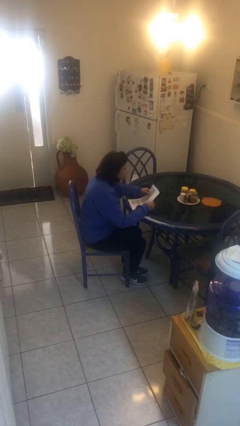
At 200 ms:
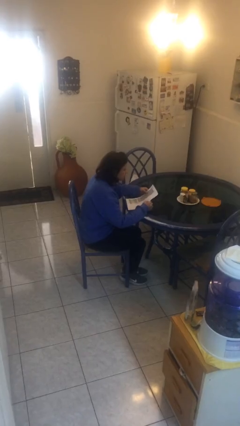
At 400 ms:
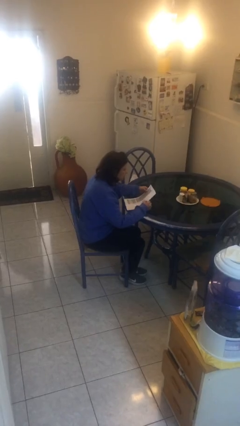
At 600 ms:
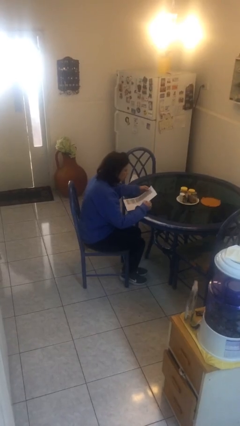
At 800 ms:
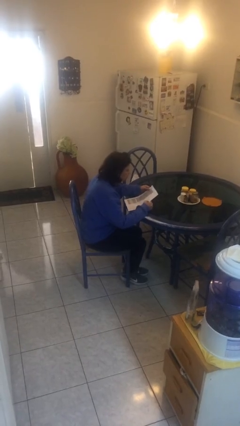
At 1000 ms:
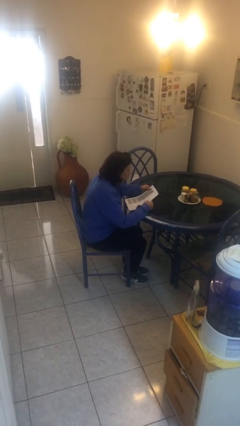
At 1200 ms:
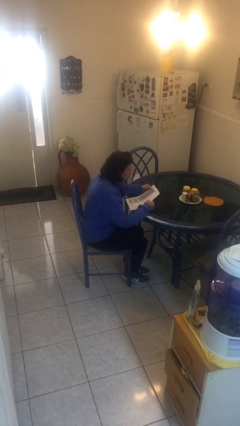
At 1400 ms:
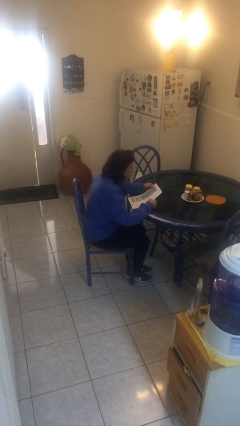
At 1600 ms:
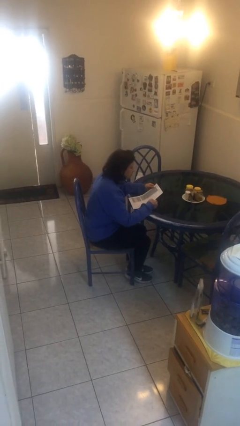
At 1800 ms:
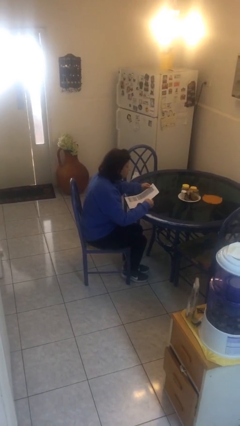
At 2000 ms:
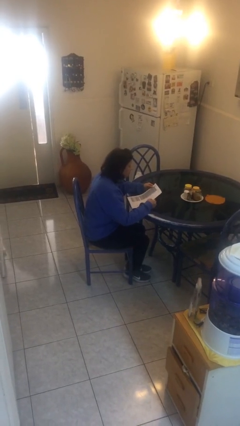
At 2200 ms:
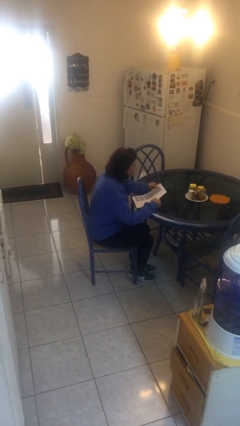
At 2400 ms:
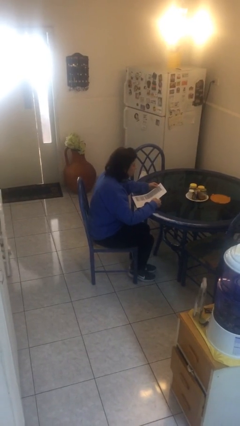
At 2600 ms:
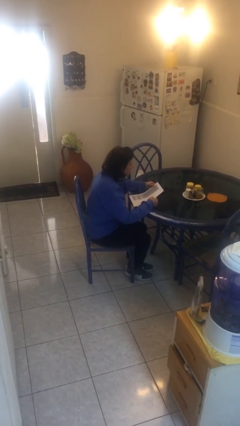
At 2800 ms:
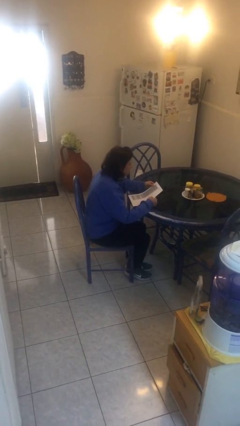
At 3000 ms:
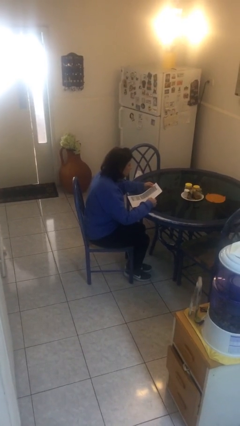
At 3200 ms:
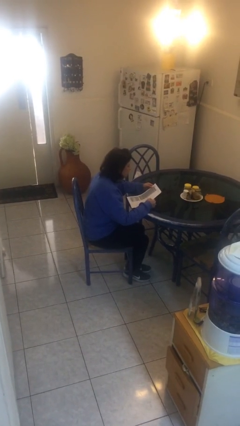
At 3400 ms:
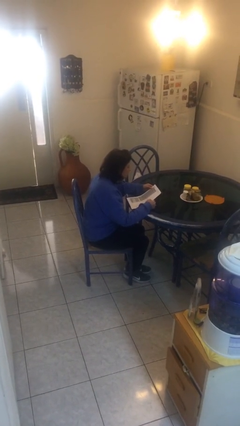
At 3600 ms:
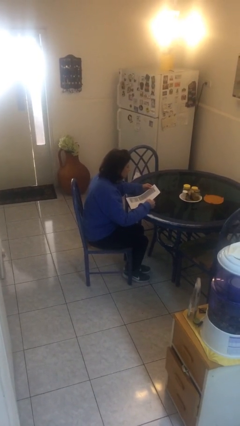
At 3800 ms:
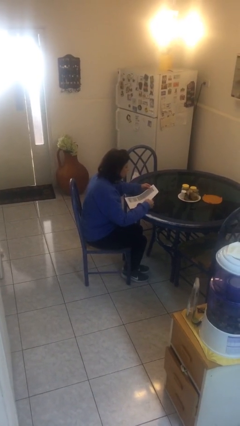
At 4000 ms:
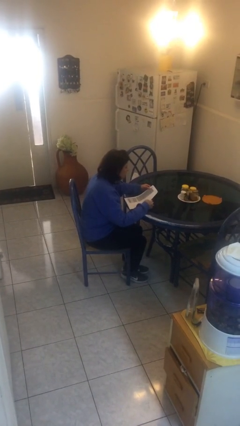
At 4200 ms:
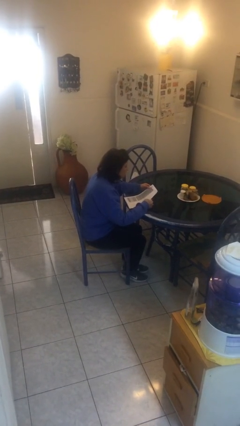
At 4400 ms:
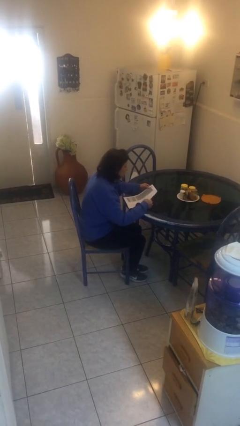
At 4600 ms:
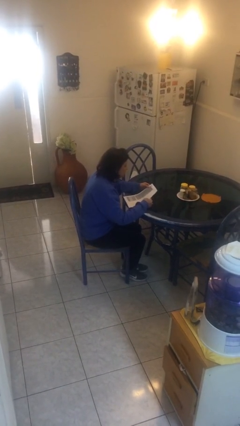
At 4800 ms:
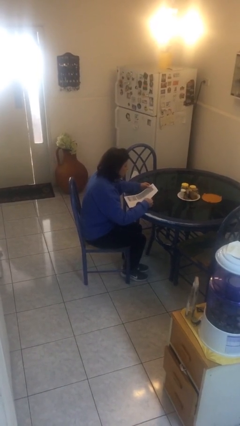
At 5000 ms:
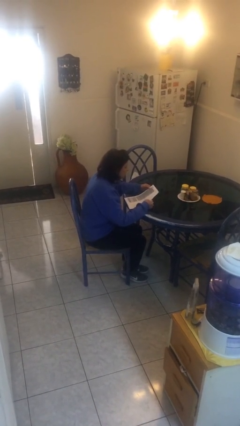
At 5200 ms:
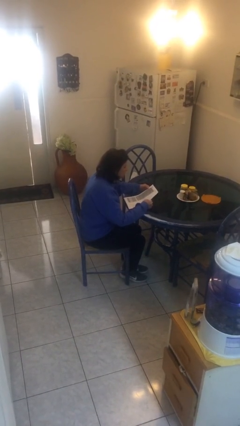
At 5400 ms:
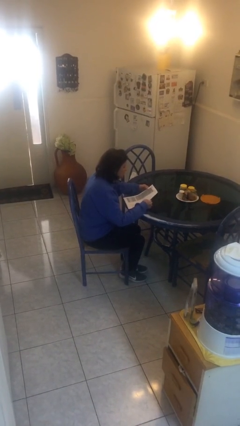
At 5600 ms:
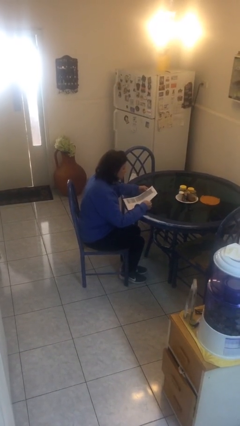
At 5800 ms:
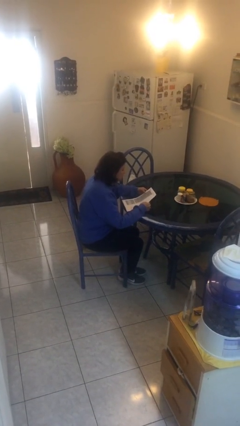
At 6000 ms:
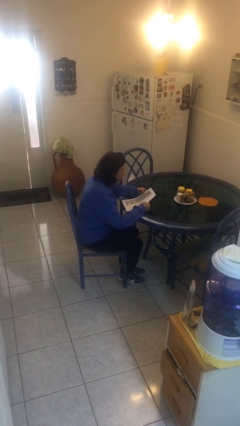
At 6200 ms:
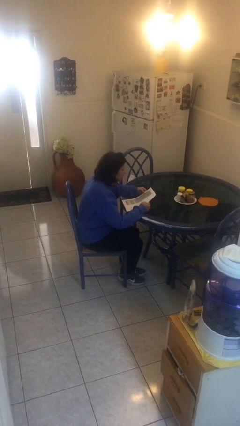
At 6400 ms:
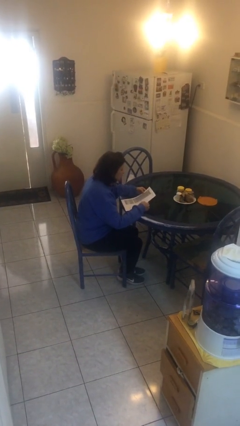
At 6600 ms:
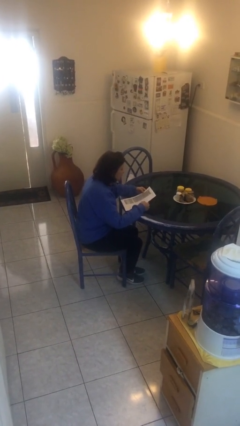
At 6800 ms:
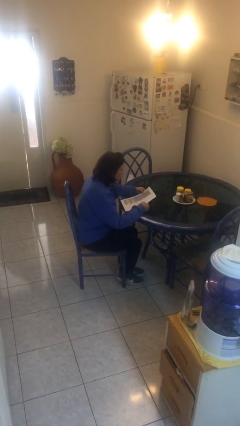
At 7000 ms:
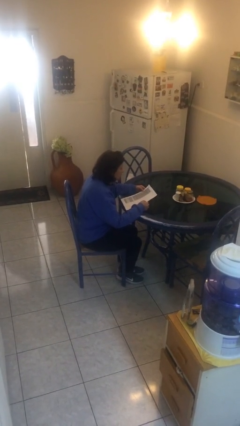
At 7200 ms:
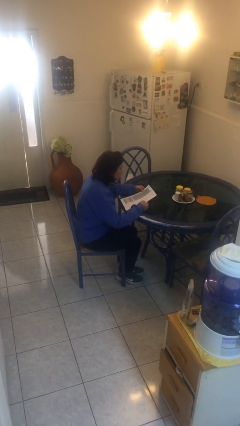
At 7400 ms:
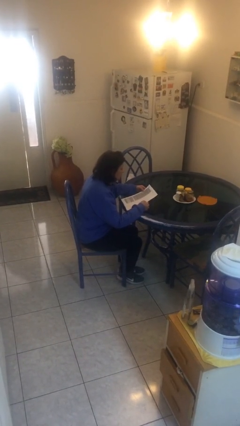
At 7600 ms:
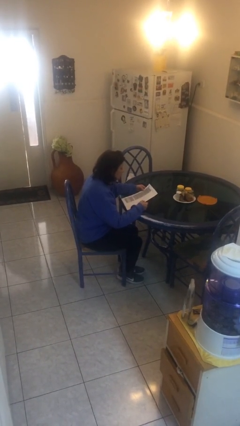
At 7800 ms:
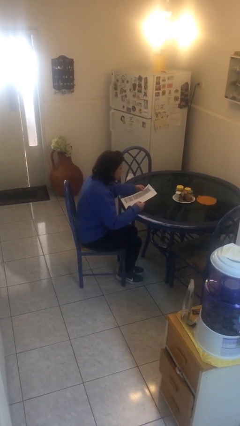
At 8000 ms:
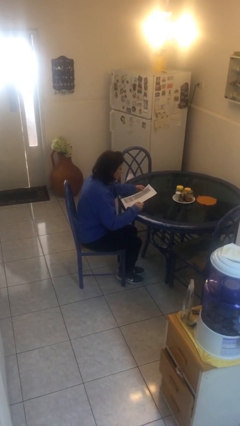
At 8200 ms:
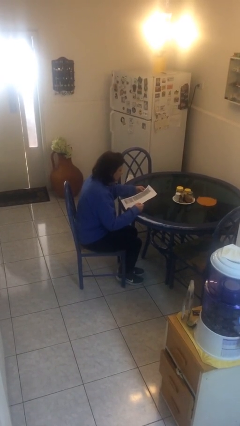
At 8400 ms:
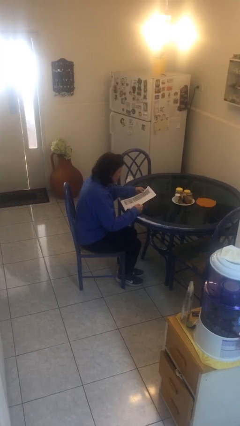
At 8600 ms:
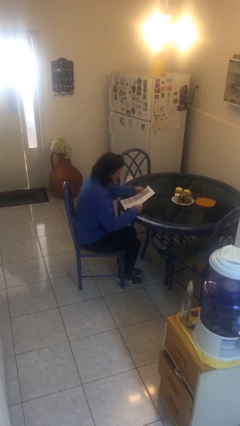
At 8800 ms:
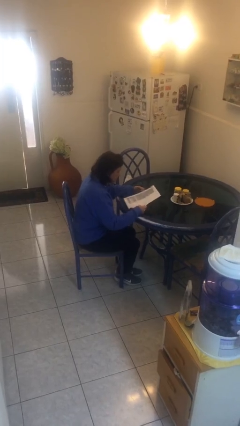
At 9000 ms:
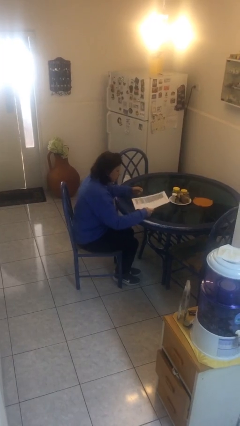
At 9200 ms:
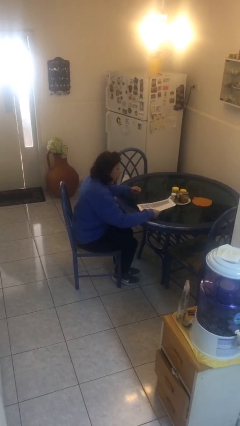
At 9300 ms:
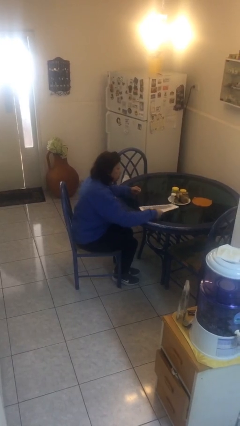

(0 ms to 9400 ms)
person reads document

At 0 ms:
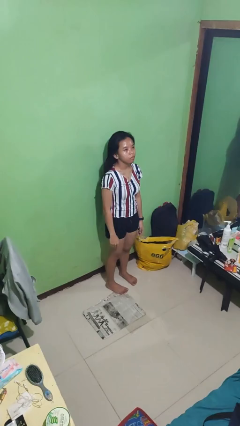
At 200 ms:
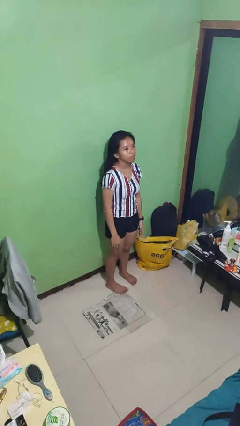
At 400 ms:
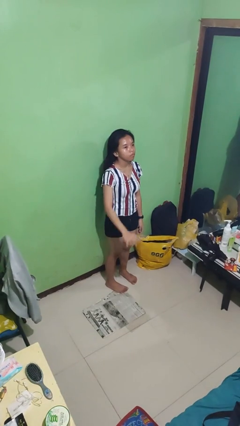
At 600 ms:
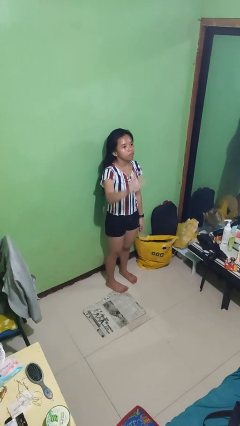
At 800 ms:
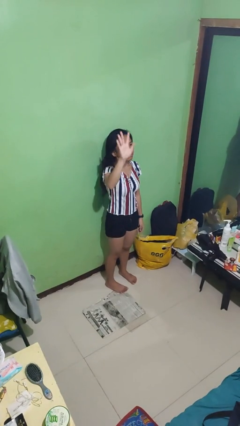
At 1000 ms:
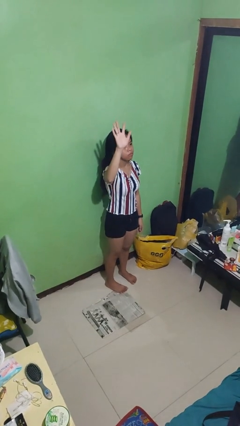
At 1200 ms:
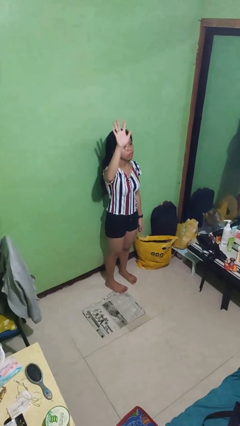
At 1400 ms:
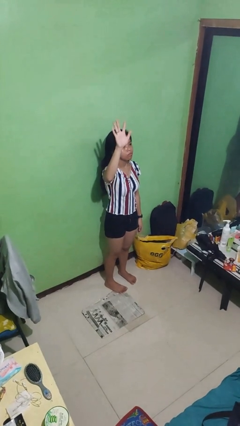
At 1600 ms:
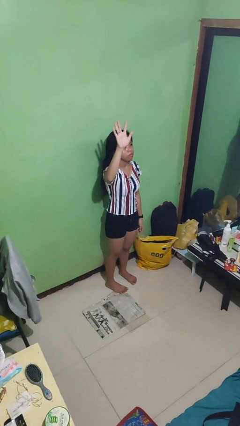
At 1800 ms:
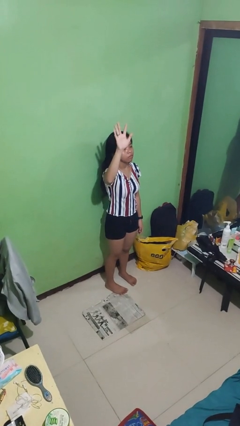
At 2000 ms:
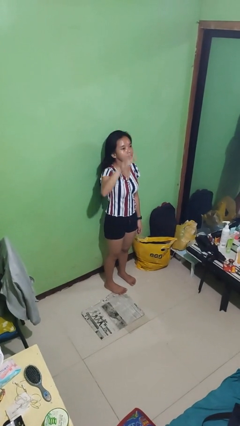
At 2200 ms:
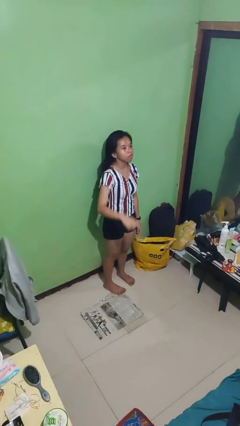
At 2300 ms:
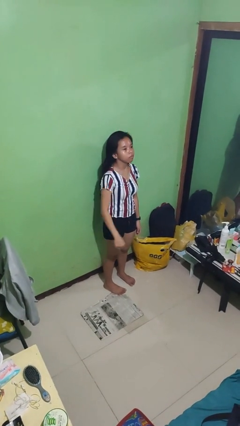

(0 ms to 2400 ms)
person gestures number five

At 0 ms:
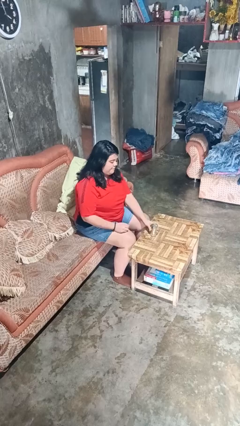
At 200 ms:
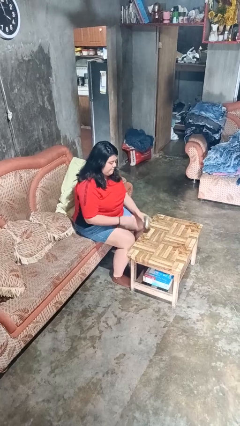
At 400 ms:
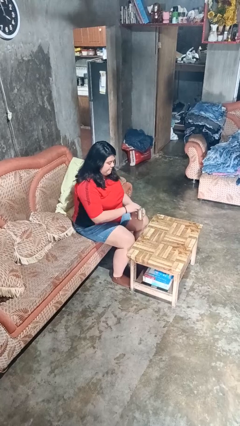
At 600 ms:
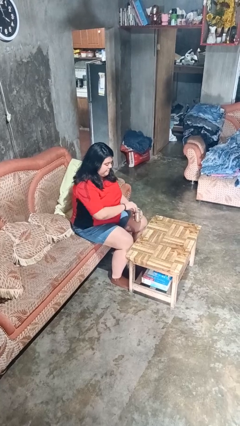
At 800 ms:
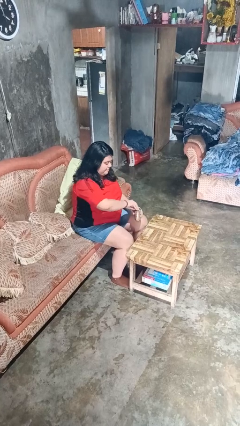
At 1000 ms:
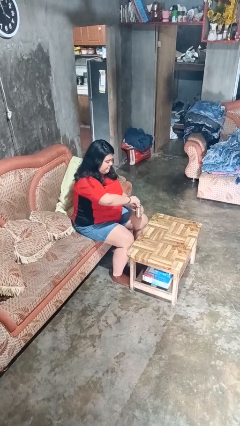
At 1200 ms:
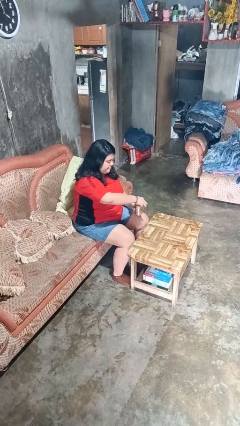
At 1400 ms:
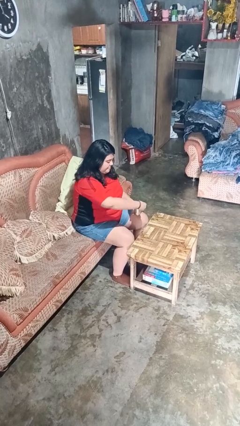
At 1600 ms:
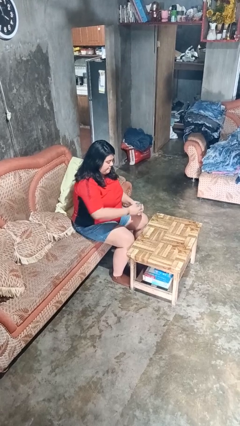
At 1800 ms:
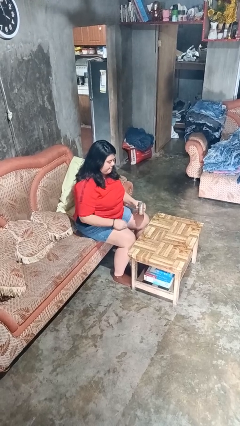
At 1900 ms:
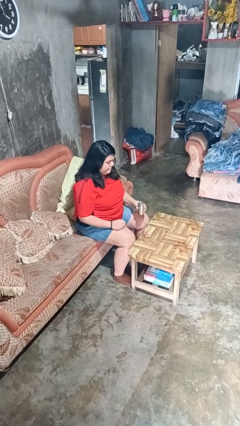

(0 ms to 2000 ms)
person opens beverage can

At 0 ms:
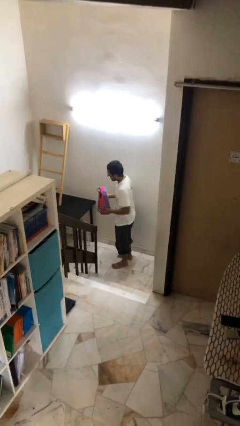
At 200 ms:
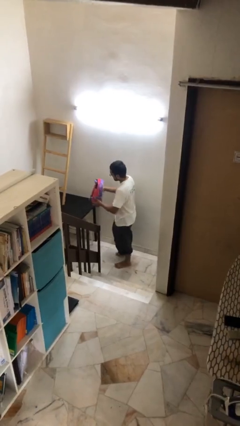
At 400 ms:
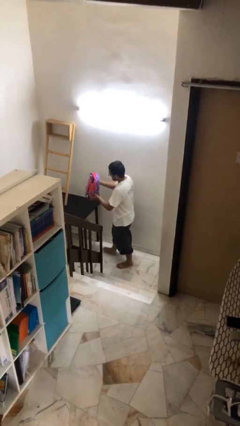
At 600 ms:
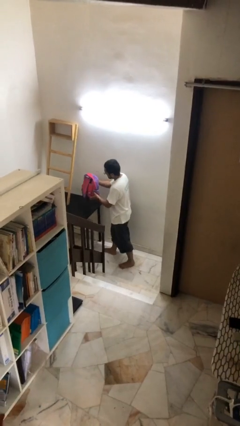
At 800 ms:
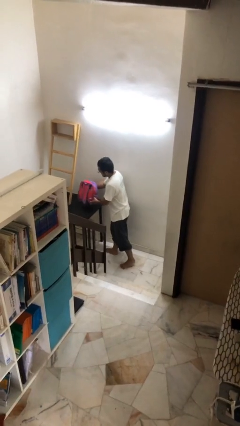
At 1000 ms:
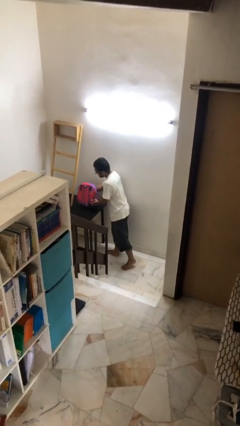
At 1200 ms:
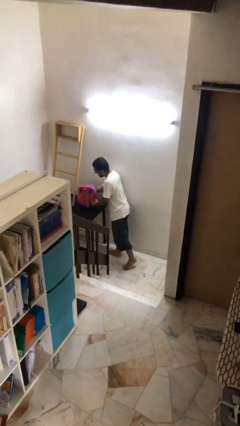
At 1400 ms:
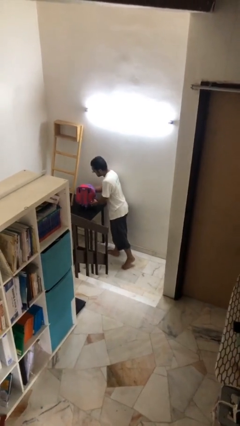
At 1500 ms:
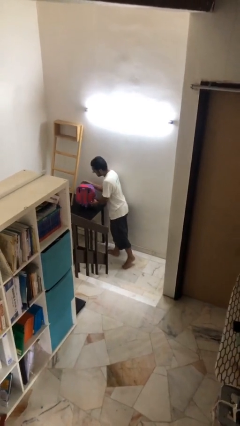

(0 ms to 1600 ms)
person puts down object on table

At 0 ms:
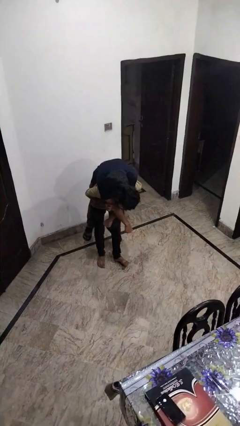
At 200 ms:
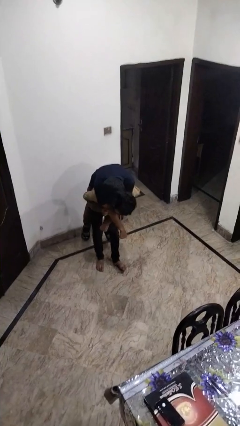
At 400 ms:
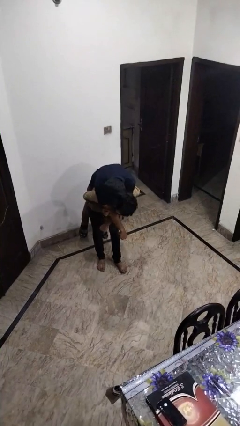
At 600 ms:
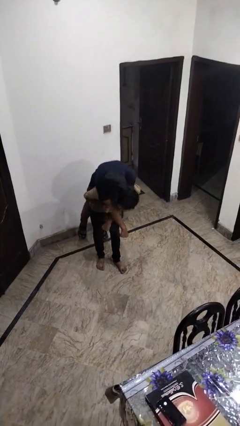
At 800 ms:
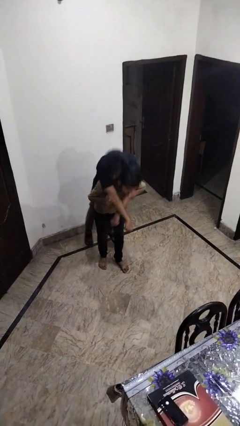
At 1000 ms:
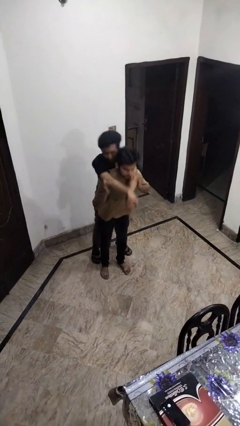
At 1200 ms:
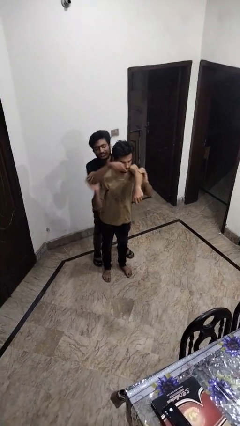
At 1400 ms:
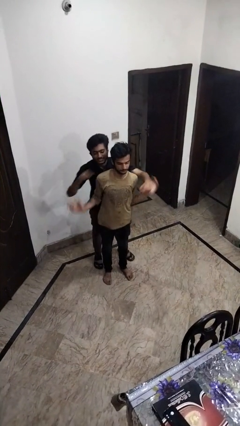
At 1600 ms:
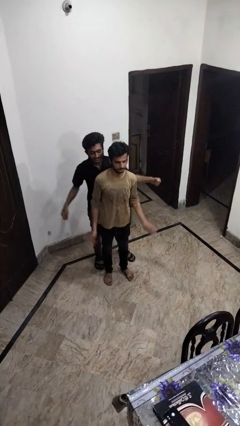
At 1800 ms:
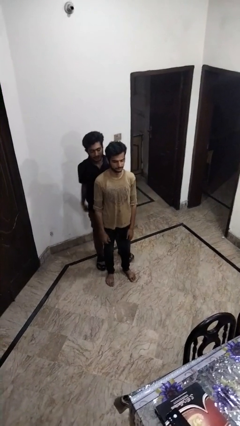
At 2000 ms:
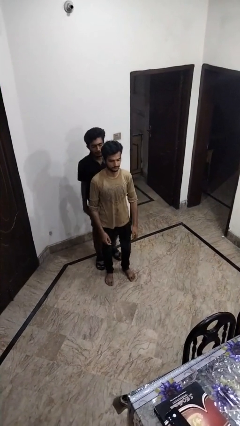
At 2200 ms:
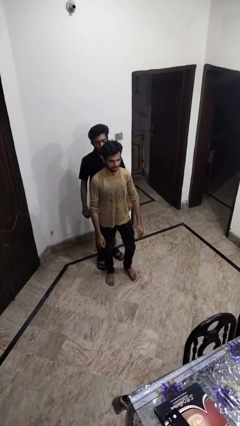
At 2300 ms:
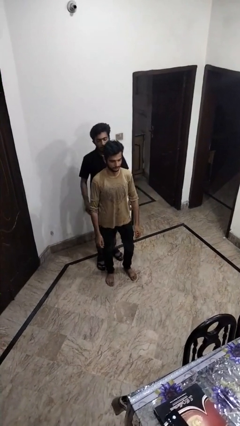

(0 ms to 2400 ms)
person puts down person
